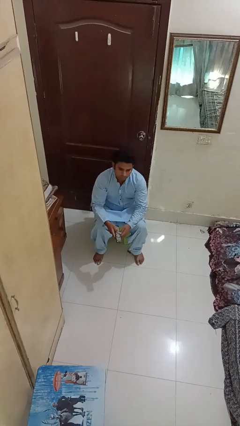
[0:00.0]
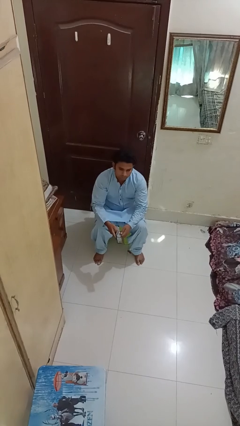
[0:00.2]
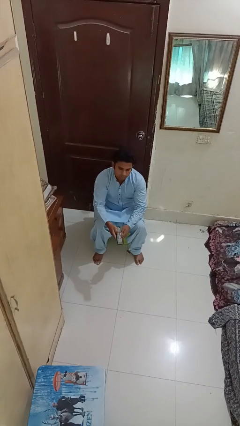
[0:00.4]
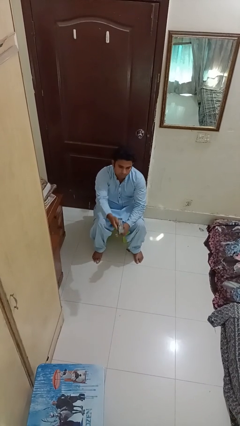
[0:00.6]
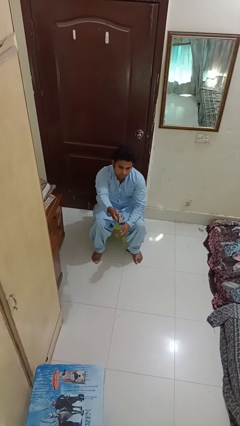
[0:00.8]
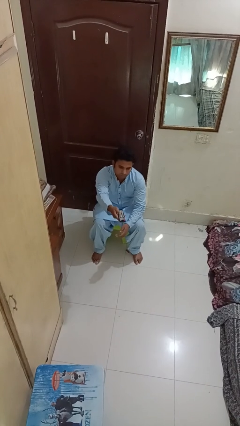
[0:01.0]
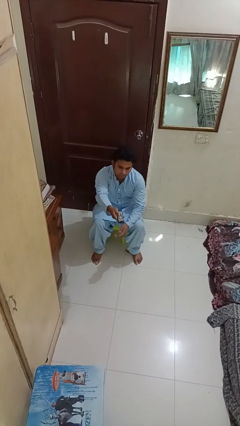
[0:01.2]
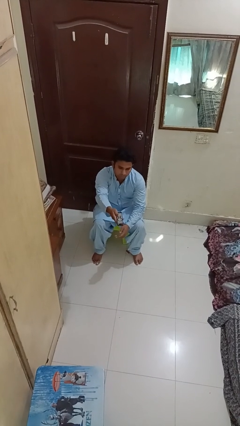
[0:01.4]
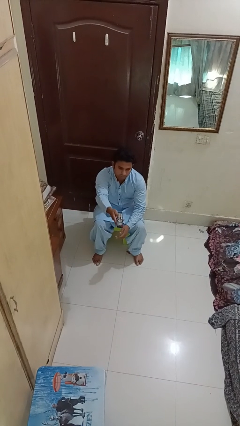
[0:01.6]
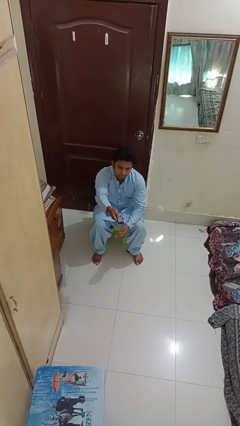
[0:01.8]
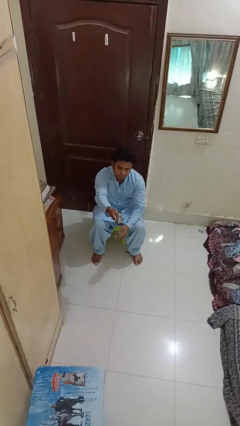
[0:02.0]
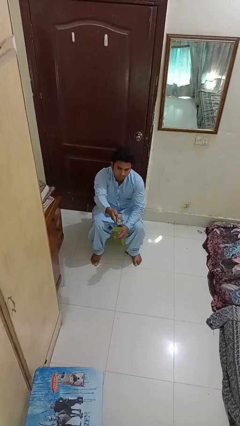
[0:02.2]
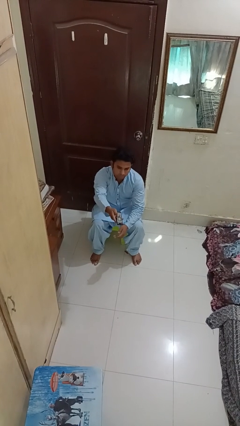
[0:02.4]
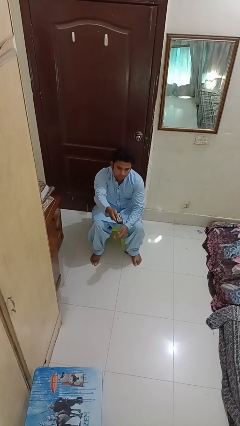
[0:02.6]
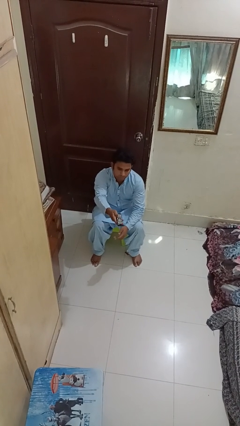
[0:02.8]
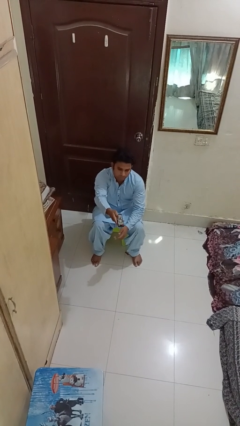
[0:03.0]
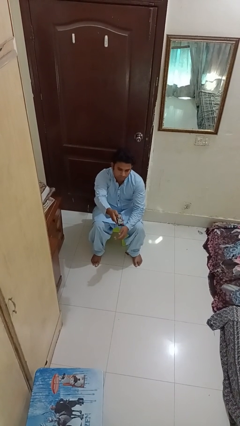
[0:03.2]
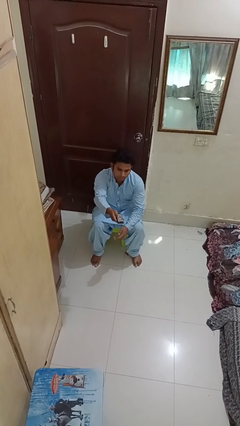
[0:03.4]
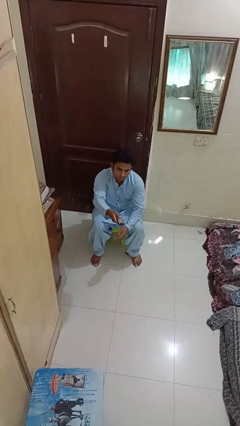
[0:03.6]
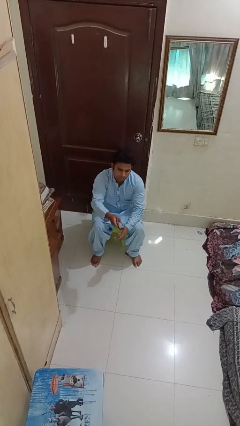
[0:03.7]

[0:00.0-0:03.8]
person uses television remote

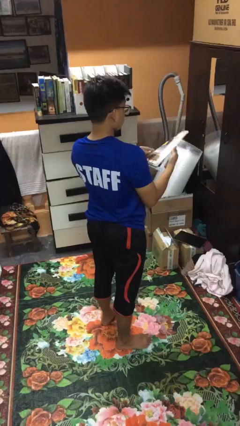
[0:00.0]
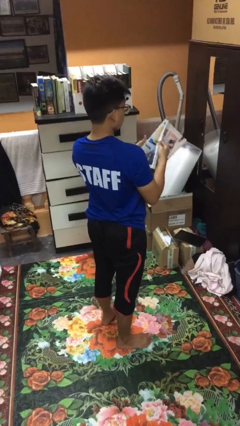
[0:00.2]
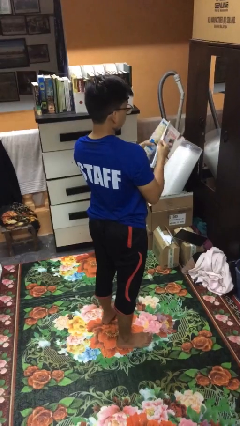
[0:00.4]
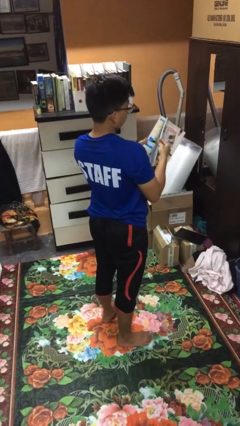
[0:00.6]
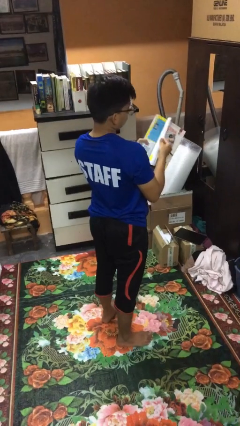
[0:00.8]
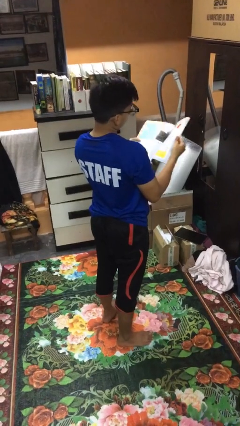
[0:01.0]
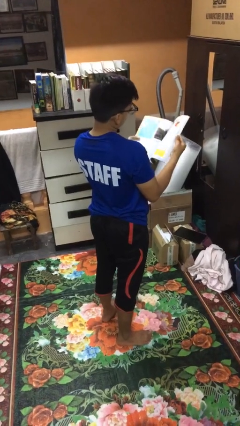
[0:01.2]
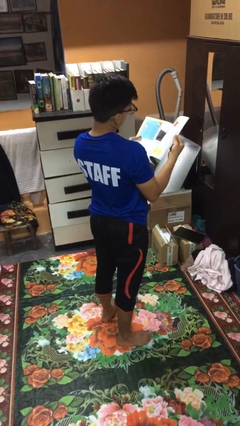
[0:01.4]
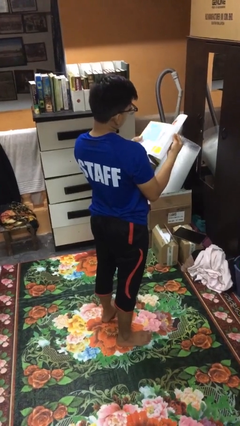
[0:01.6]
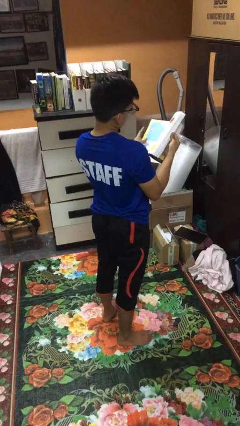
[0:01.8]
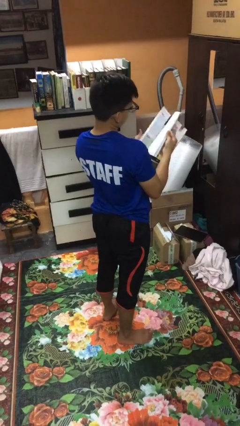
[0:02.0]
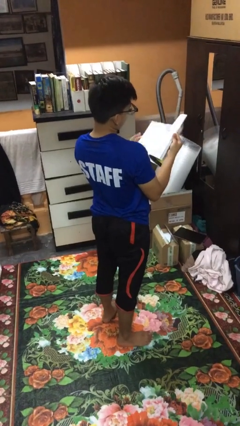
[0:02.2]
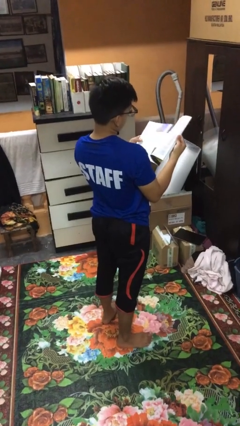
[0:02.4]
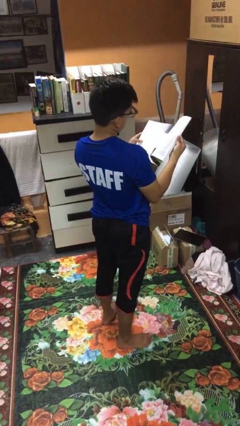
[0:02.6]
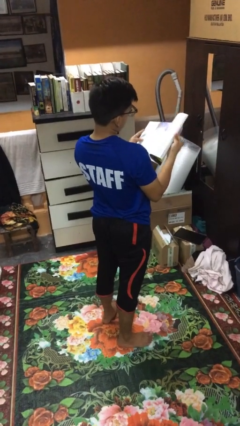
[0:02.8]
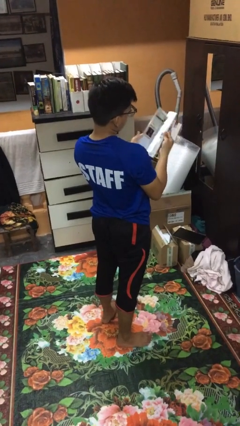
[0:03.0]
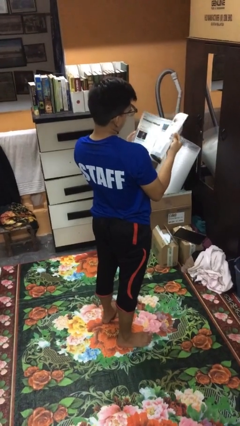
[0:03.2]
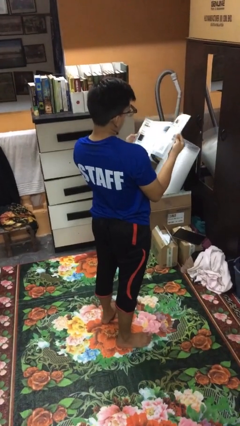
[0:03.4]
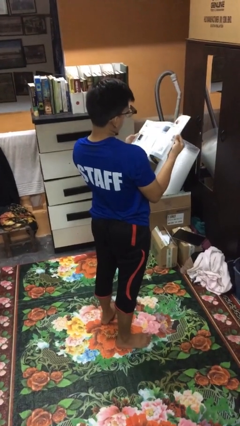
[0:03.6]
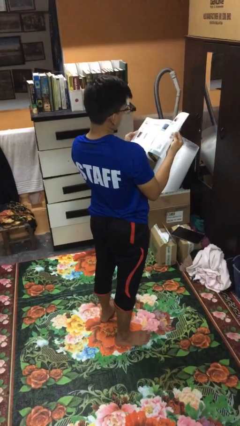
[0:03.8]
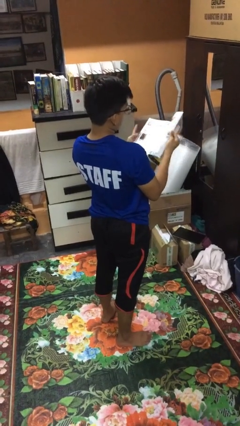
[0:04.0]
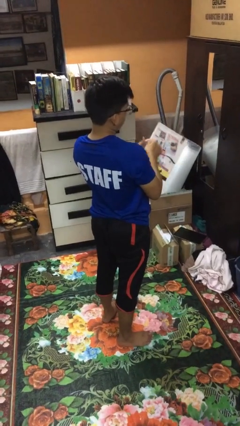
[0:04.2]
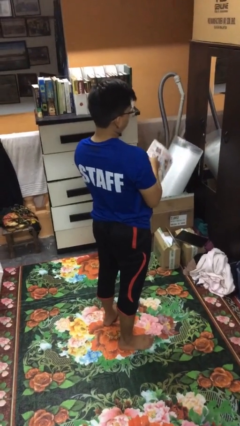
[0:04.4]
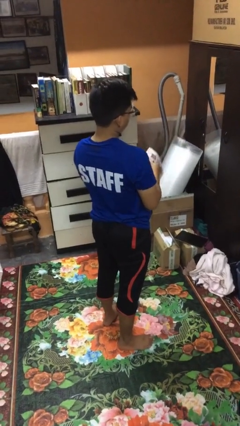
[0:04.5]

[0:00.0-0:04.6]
person reads magazine

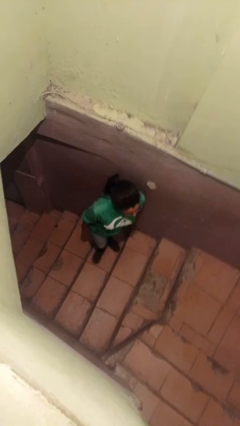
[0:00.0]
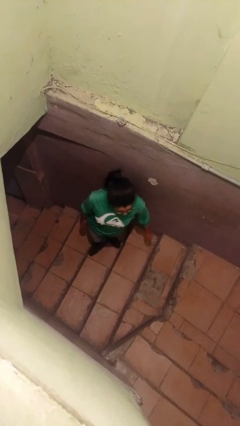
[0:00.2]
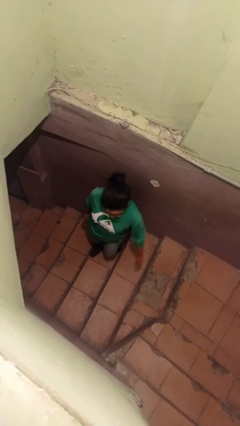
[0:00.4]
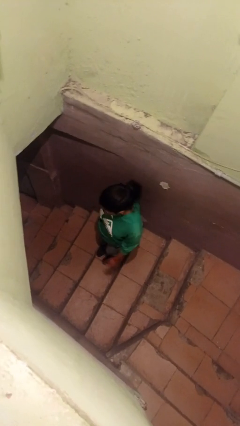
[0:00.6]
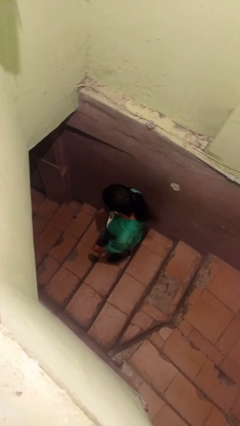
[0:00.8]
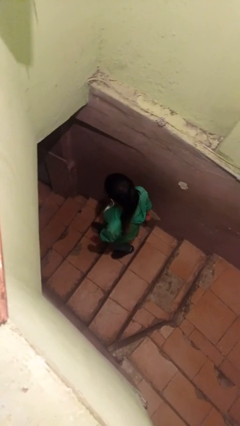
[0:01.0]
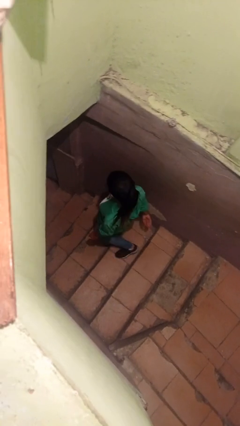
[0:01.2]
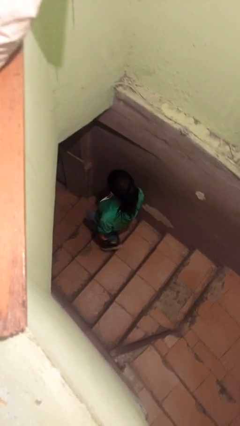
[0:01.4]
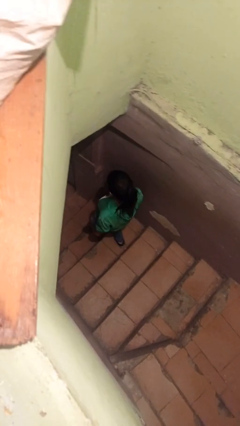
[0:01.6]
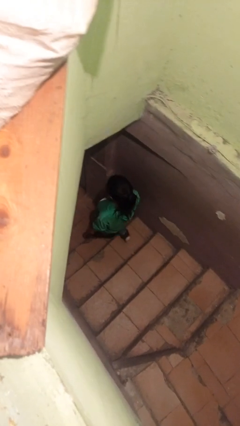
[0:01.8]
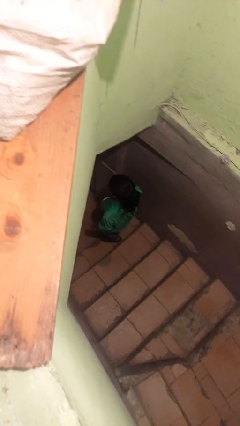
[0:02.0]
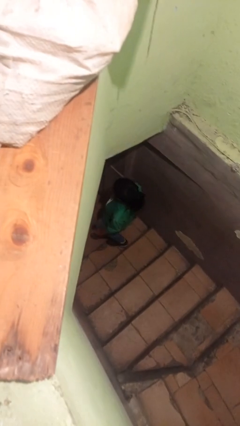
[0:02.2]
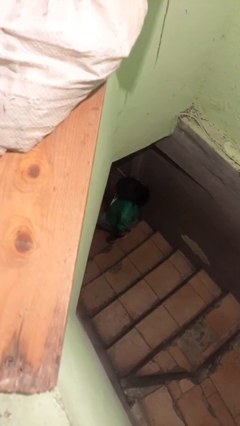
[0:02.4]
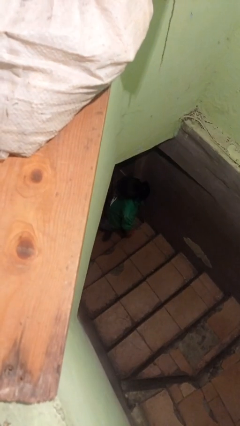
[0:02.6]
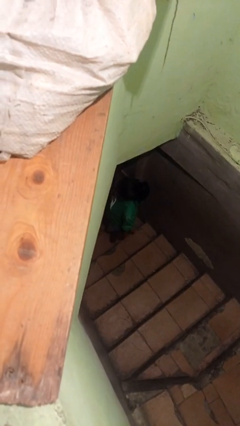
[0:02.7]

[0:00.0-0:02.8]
person climbs down stairs

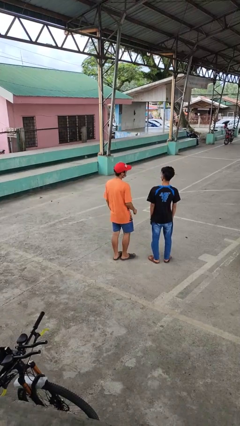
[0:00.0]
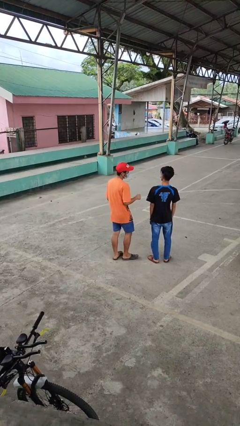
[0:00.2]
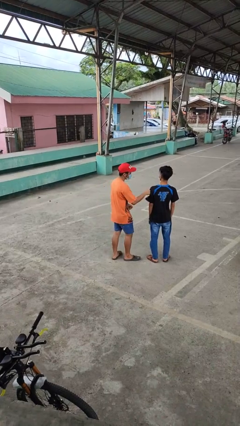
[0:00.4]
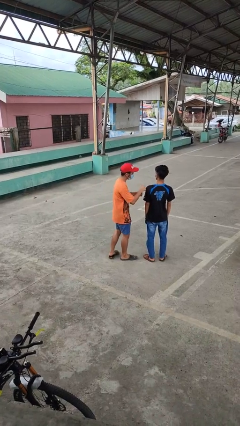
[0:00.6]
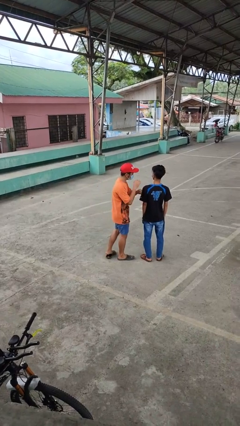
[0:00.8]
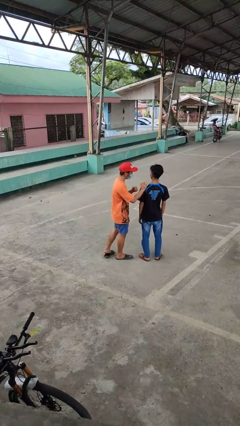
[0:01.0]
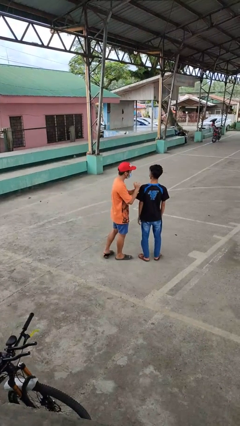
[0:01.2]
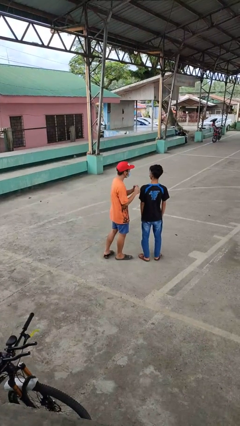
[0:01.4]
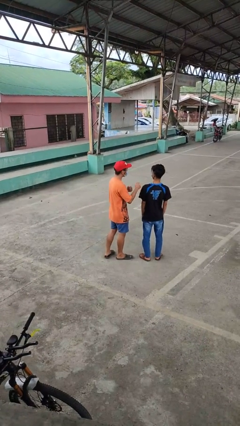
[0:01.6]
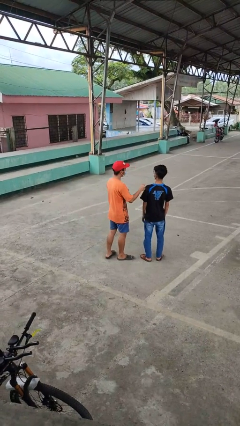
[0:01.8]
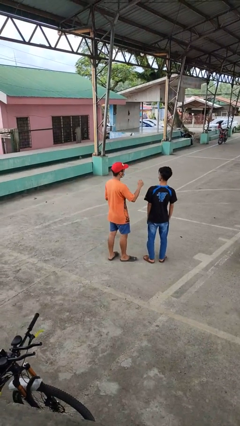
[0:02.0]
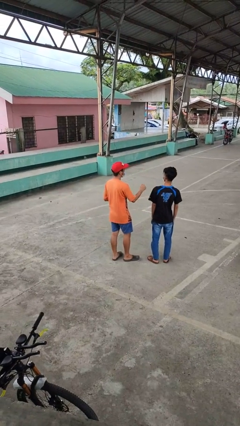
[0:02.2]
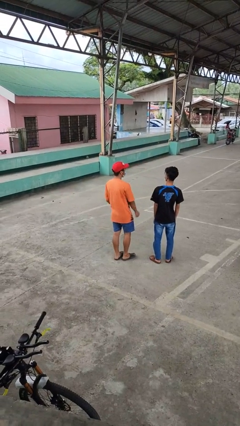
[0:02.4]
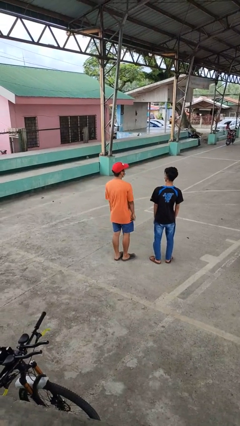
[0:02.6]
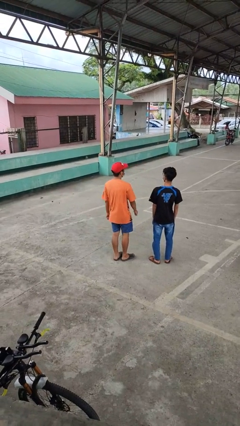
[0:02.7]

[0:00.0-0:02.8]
person pounds shoulders of person

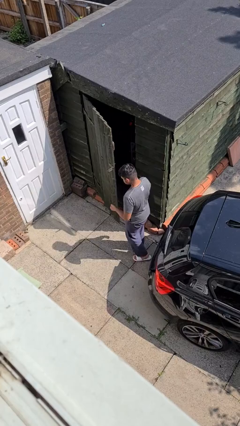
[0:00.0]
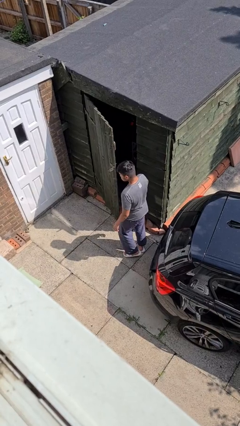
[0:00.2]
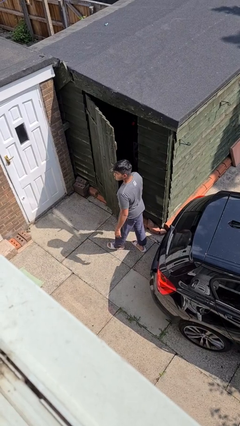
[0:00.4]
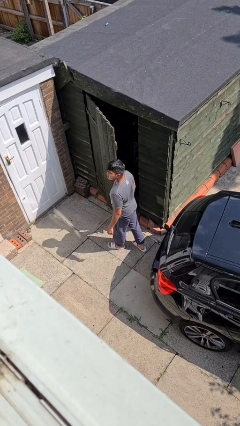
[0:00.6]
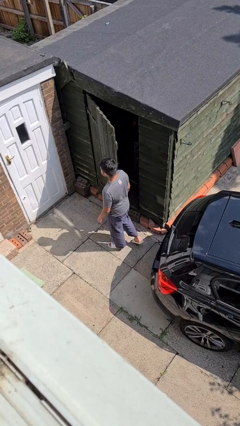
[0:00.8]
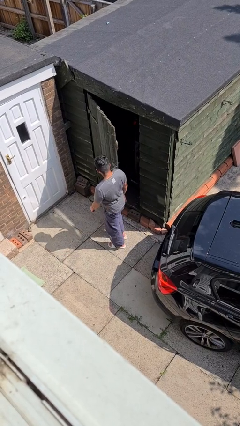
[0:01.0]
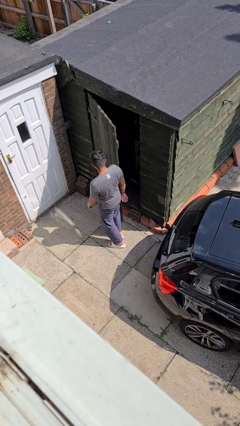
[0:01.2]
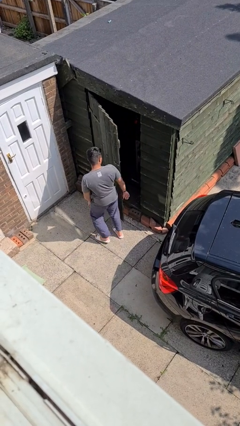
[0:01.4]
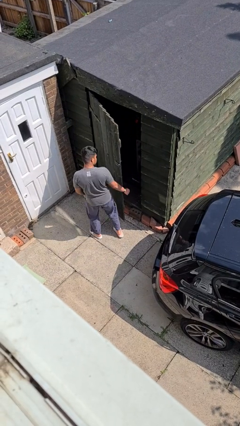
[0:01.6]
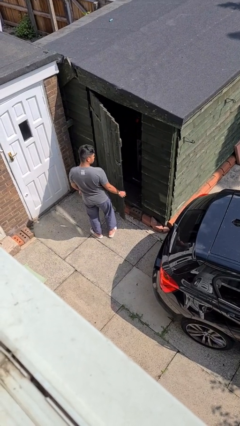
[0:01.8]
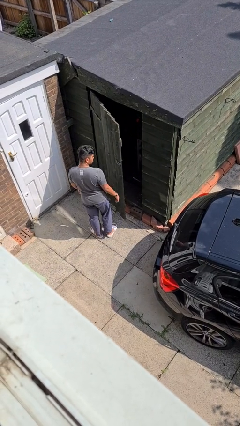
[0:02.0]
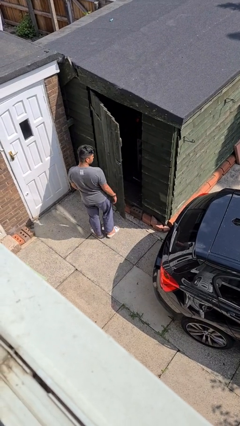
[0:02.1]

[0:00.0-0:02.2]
person bumps into wall

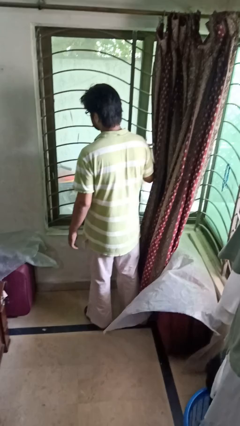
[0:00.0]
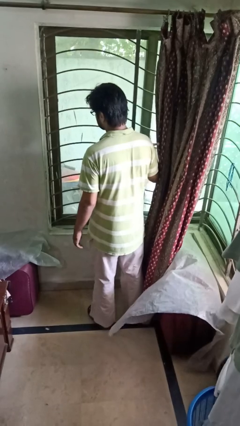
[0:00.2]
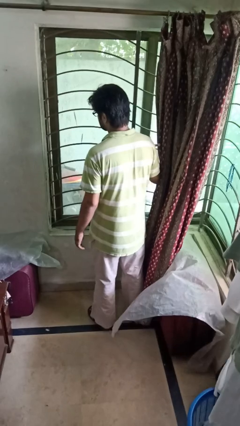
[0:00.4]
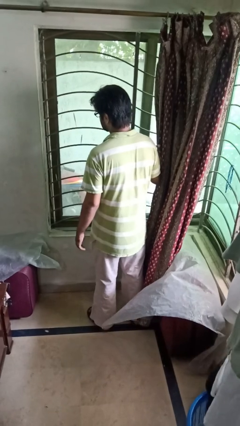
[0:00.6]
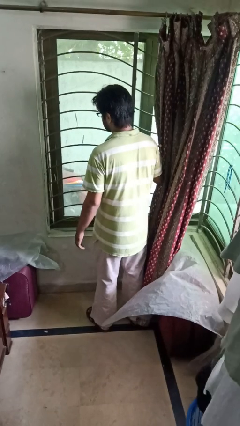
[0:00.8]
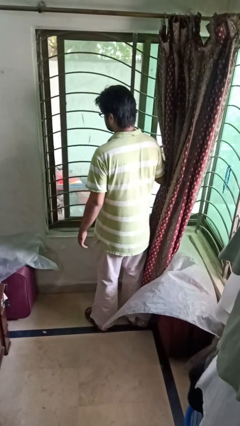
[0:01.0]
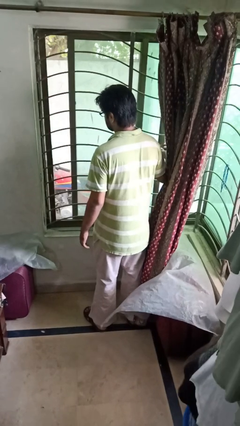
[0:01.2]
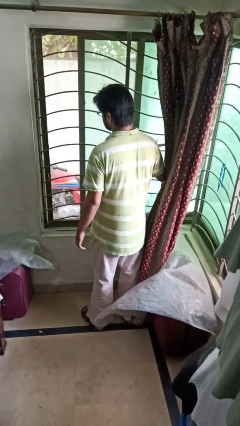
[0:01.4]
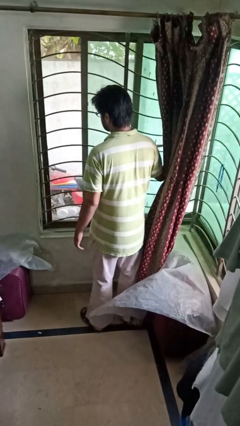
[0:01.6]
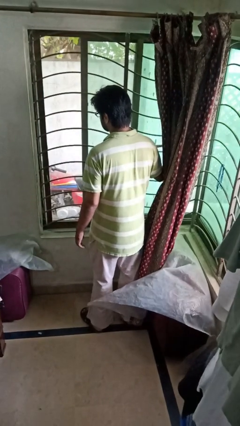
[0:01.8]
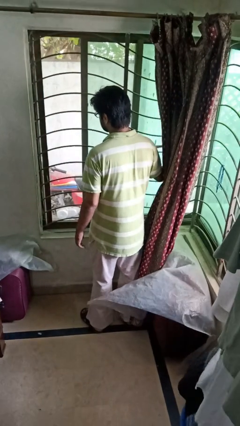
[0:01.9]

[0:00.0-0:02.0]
person opens home window
